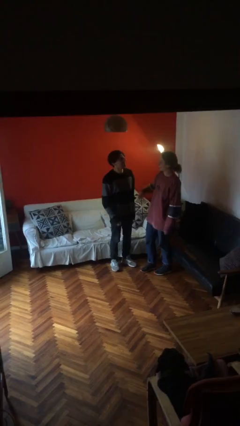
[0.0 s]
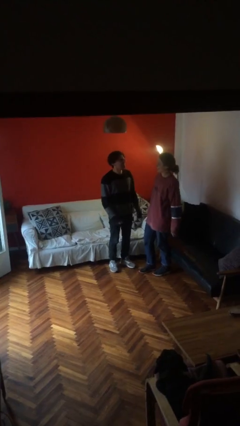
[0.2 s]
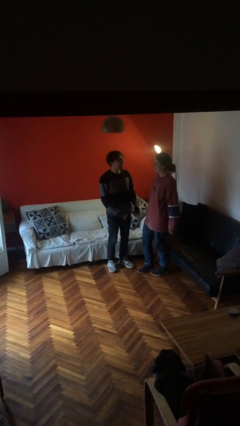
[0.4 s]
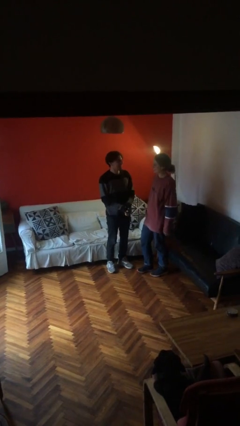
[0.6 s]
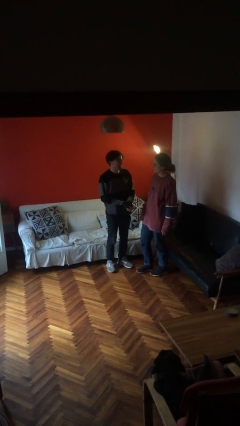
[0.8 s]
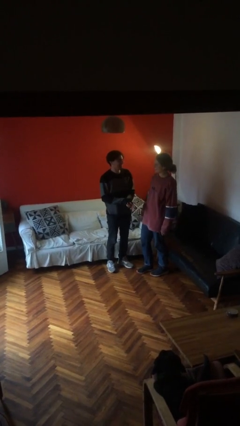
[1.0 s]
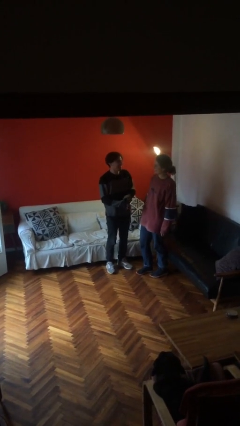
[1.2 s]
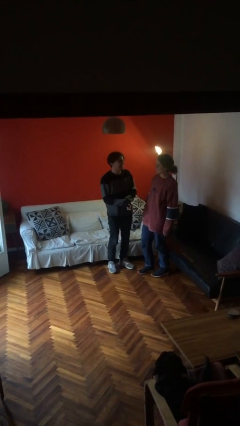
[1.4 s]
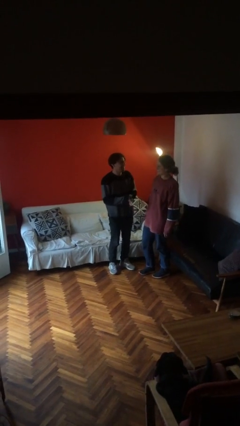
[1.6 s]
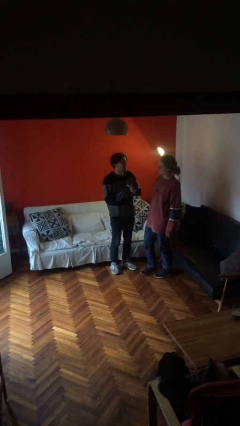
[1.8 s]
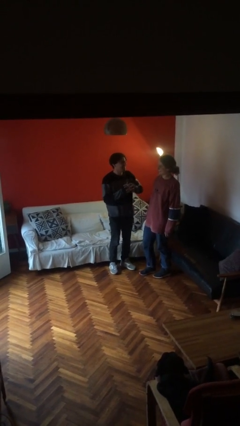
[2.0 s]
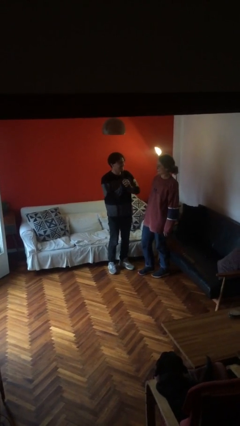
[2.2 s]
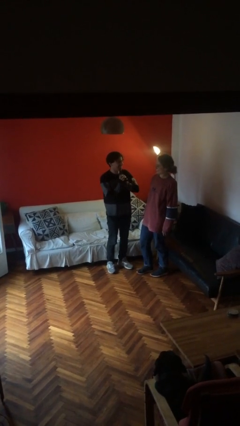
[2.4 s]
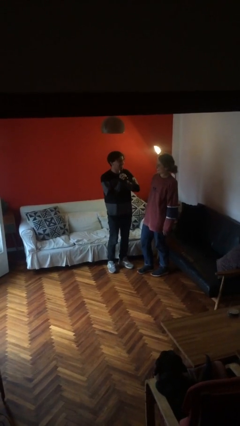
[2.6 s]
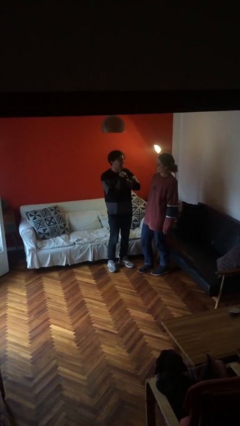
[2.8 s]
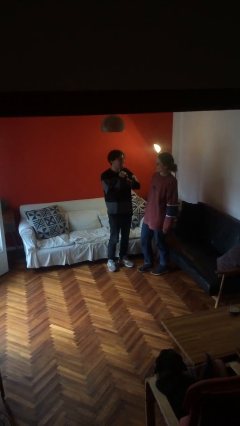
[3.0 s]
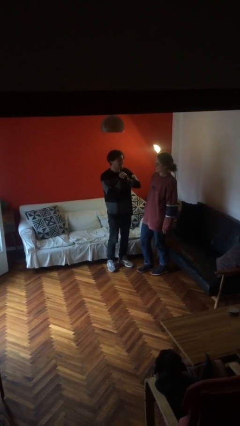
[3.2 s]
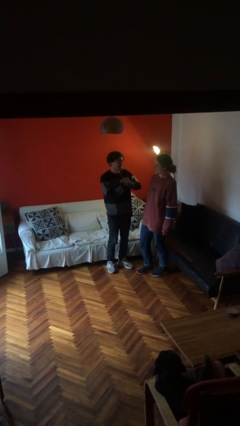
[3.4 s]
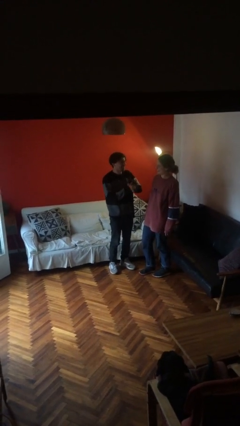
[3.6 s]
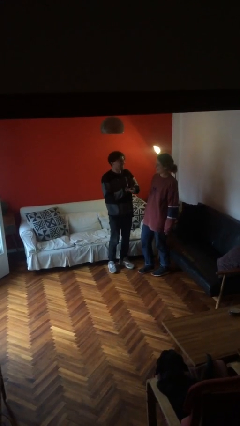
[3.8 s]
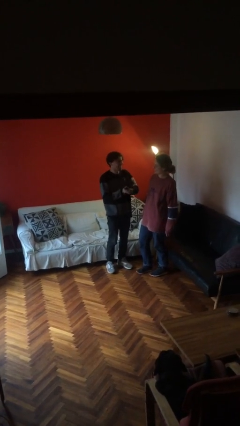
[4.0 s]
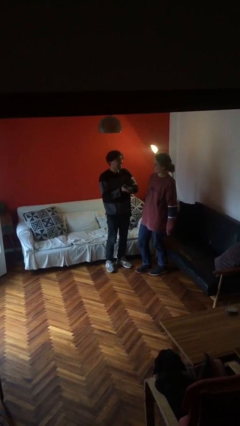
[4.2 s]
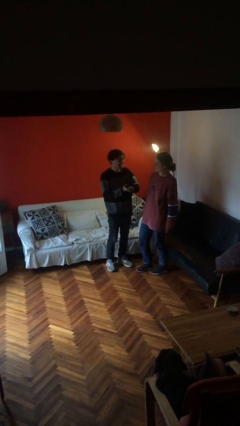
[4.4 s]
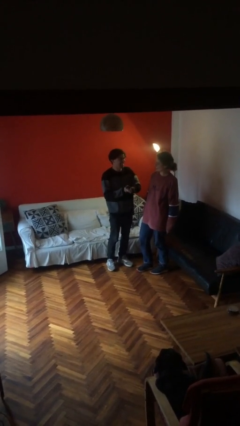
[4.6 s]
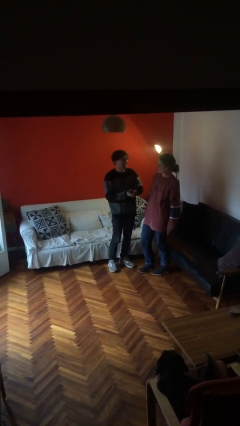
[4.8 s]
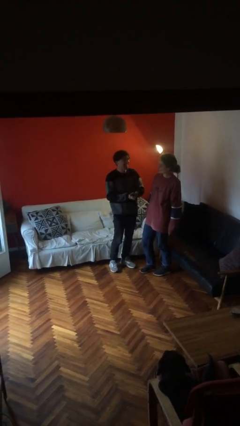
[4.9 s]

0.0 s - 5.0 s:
person talks to person

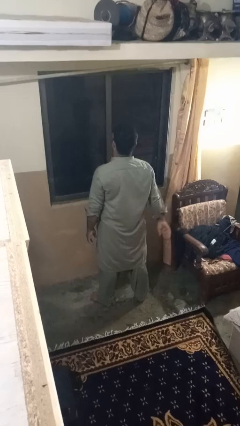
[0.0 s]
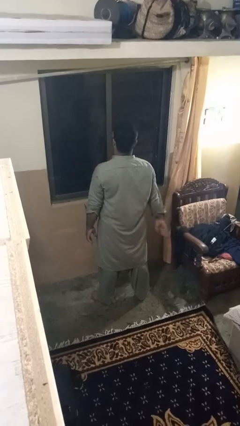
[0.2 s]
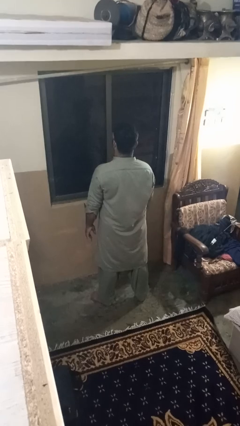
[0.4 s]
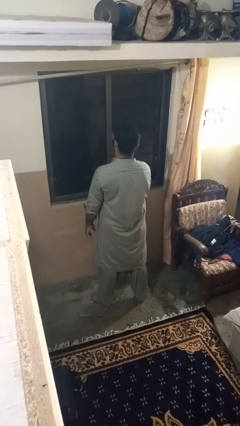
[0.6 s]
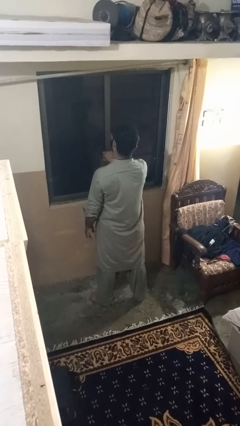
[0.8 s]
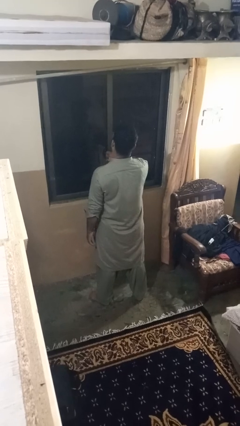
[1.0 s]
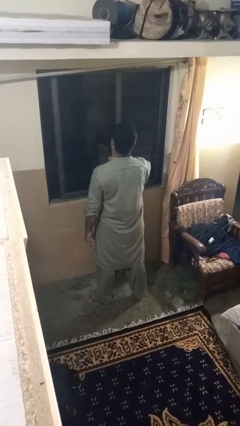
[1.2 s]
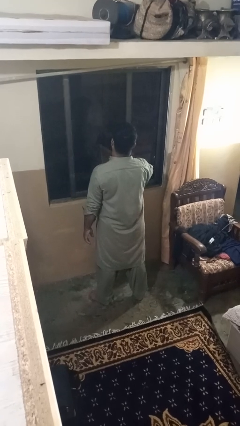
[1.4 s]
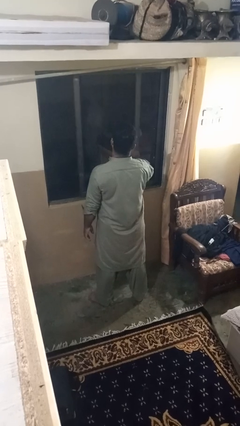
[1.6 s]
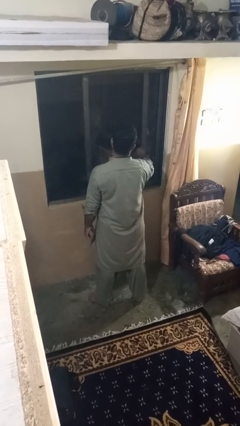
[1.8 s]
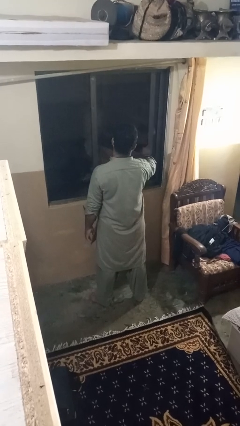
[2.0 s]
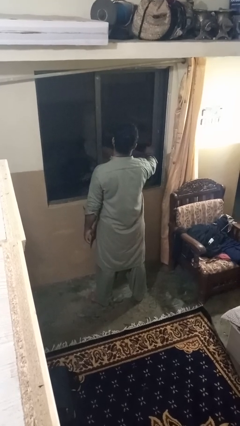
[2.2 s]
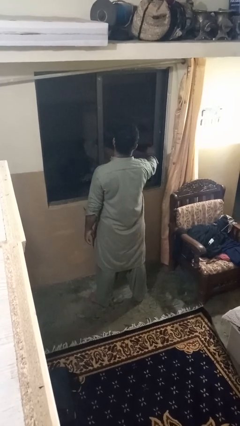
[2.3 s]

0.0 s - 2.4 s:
person opens home window

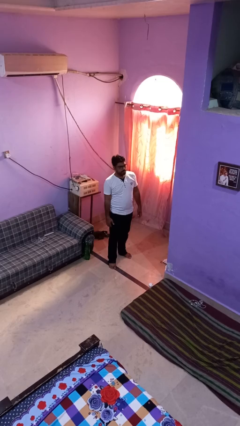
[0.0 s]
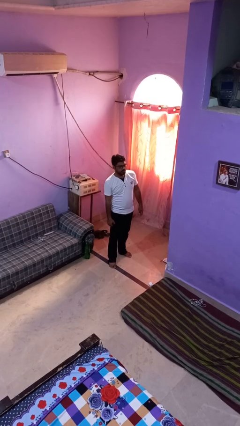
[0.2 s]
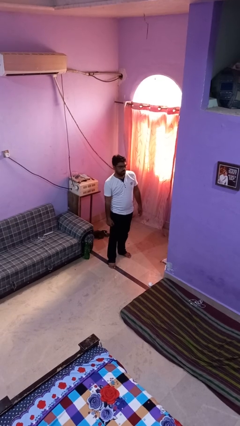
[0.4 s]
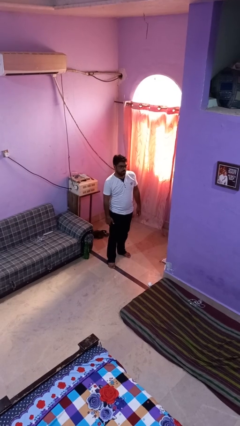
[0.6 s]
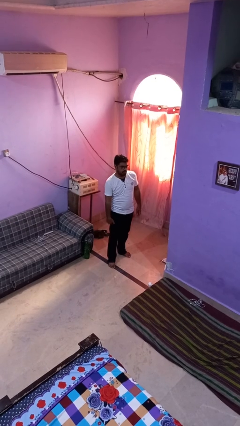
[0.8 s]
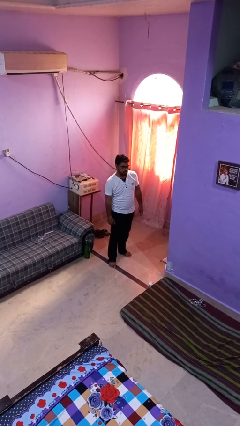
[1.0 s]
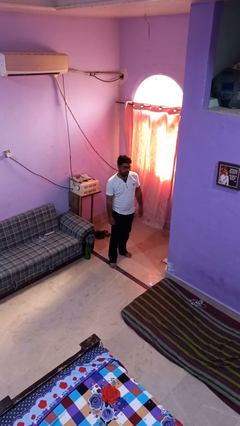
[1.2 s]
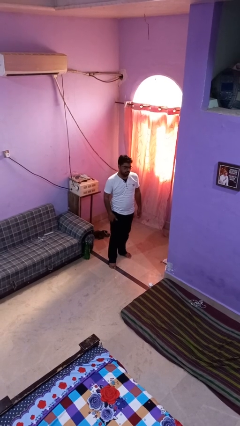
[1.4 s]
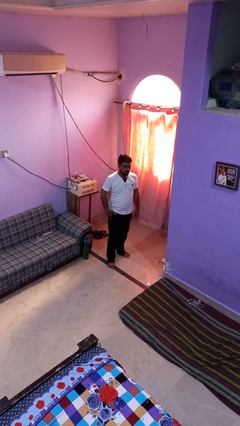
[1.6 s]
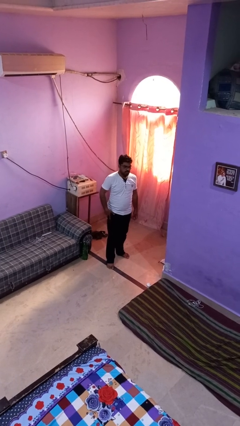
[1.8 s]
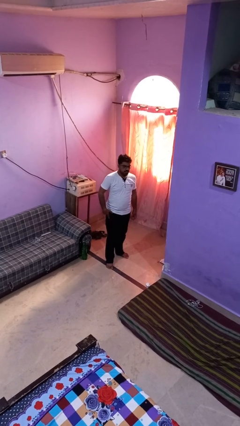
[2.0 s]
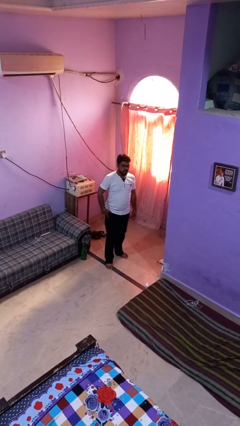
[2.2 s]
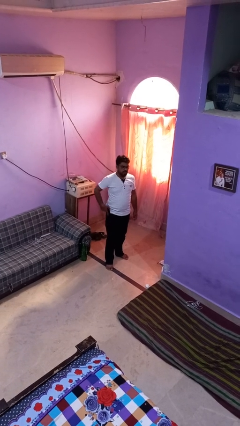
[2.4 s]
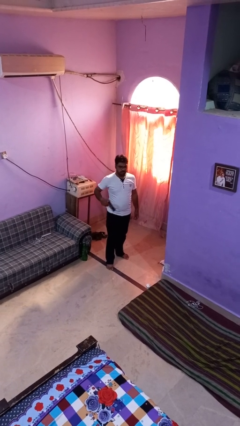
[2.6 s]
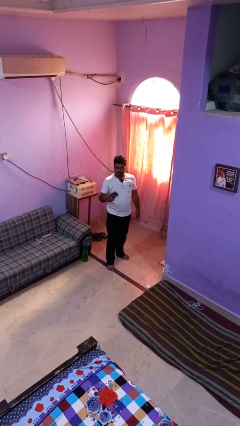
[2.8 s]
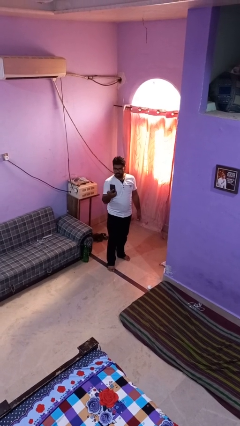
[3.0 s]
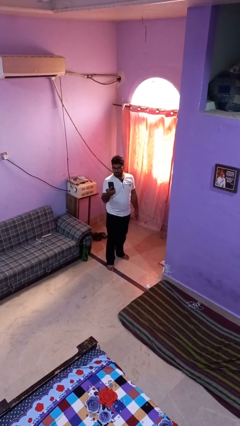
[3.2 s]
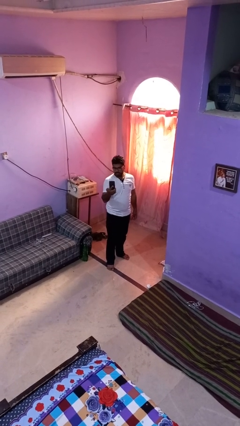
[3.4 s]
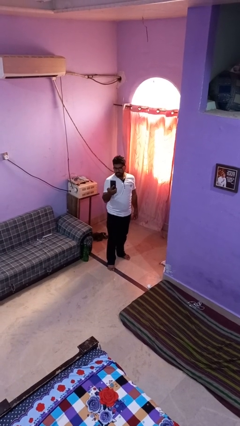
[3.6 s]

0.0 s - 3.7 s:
person takes phone from pocket

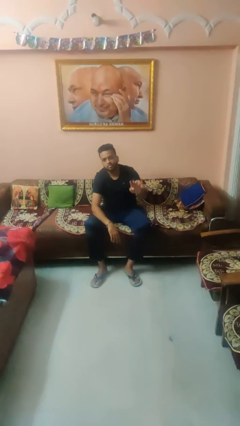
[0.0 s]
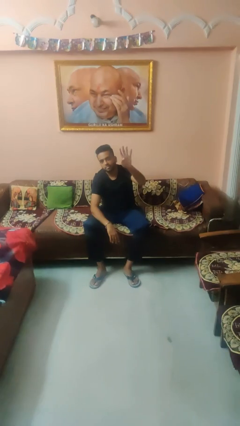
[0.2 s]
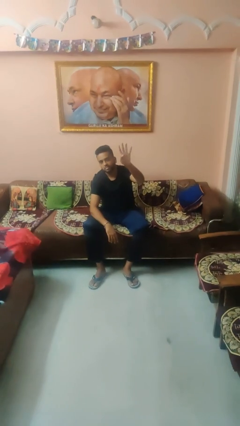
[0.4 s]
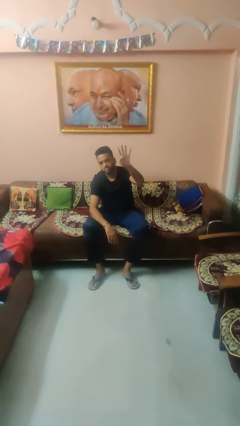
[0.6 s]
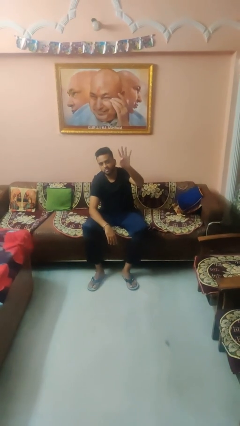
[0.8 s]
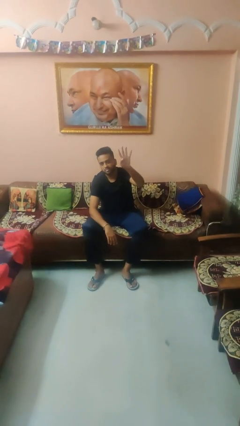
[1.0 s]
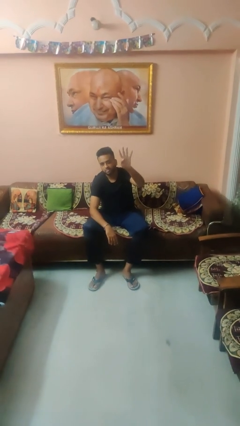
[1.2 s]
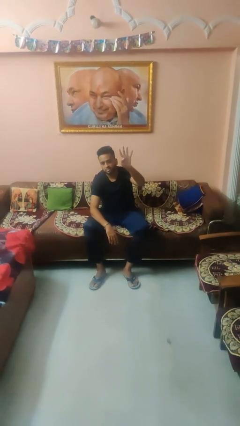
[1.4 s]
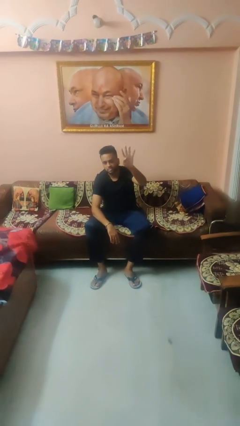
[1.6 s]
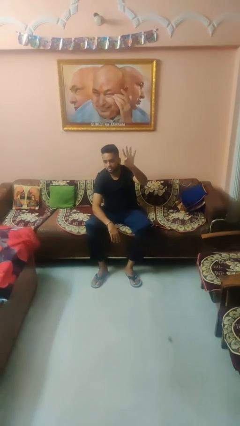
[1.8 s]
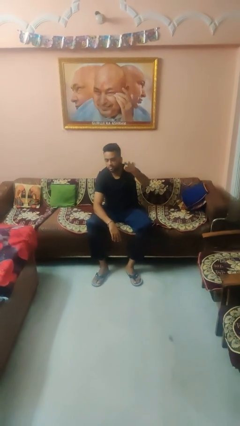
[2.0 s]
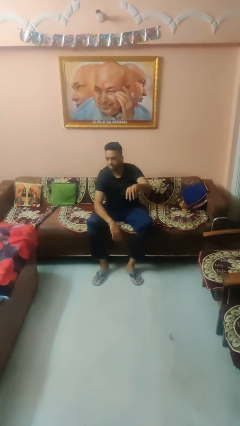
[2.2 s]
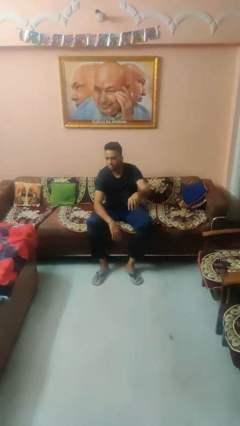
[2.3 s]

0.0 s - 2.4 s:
person gestures number four

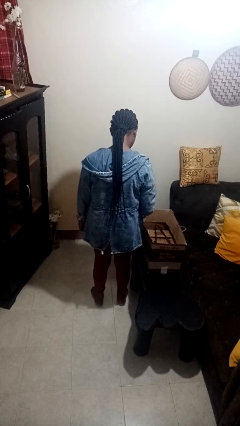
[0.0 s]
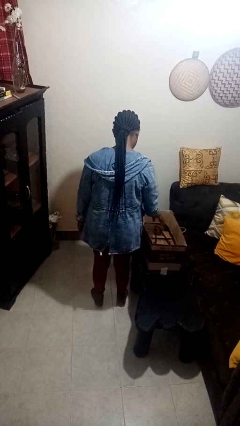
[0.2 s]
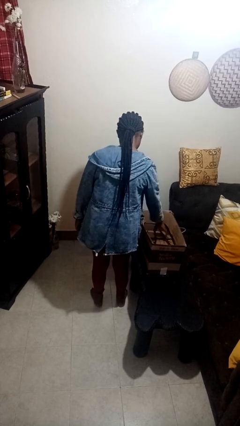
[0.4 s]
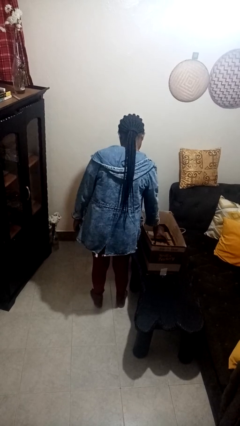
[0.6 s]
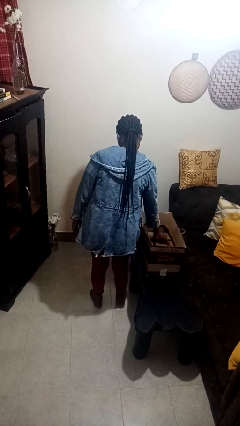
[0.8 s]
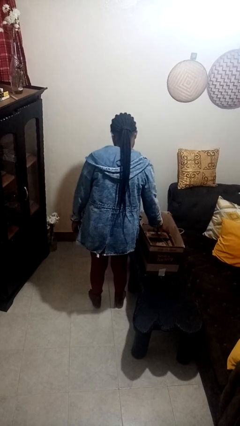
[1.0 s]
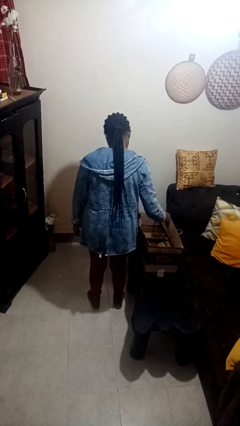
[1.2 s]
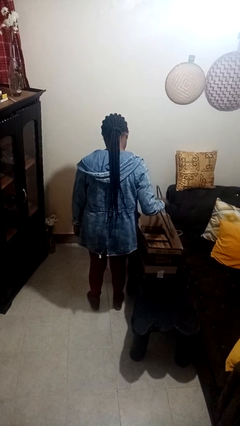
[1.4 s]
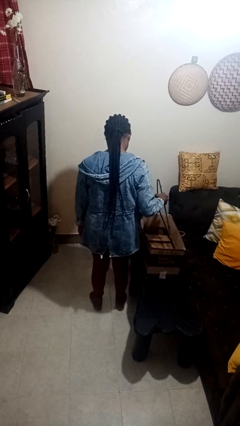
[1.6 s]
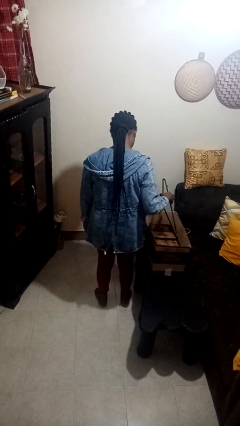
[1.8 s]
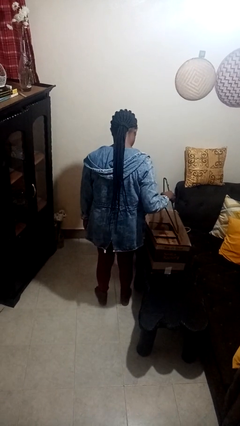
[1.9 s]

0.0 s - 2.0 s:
person takes object from box

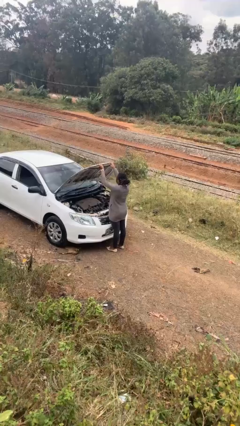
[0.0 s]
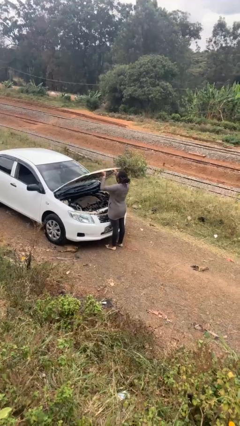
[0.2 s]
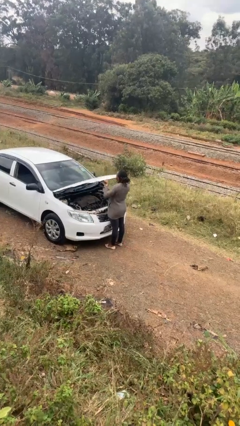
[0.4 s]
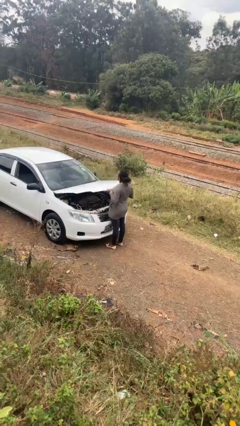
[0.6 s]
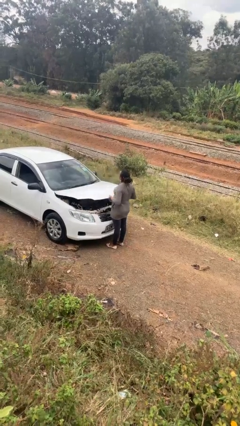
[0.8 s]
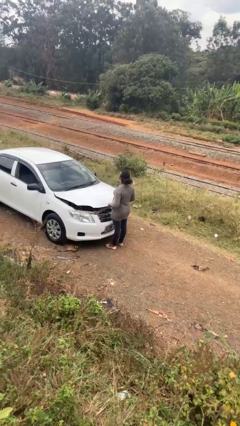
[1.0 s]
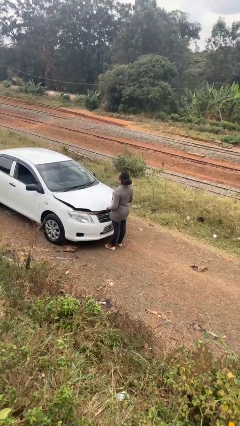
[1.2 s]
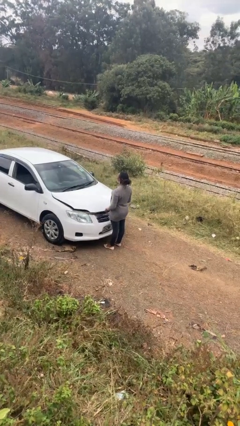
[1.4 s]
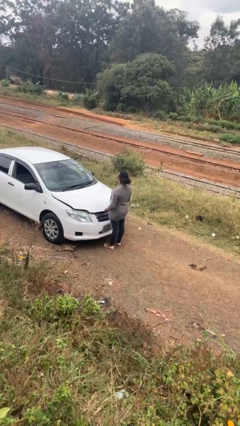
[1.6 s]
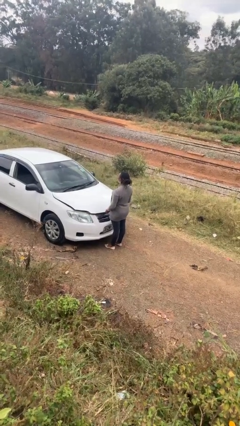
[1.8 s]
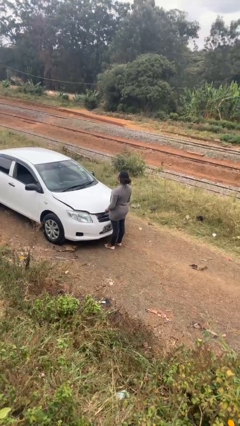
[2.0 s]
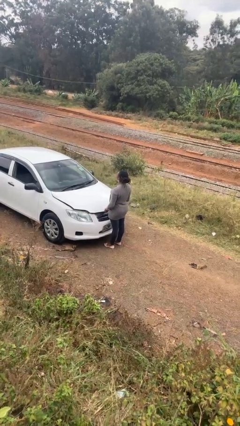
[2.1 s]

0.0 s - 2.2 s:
person closes car hood
